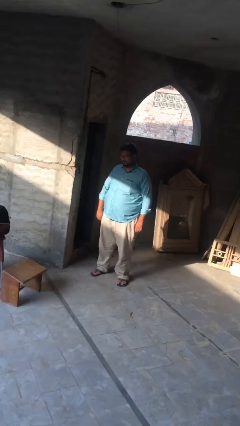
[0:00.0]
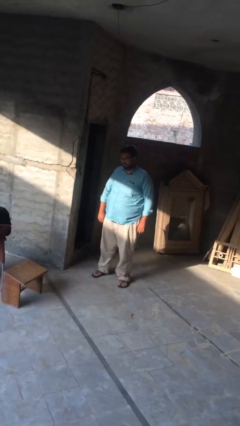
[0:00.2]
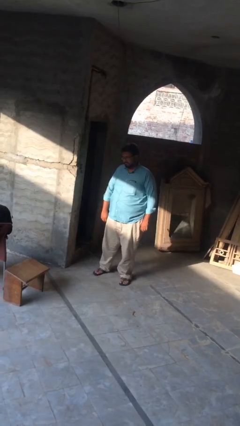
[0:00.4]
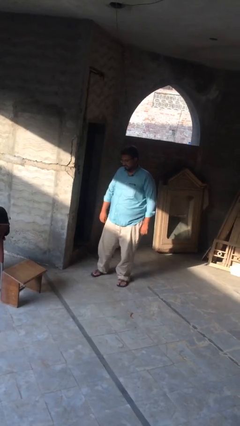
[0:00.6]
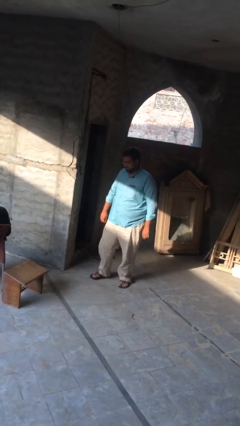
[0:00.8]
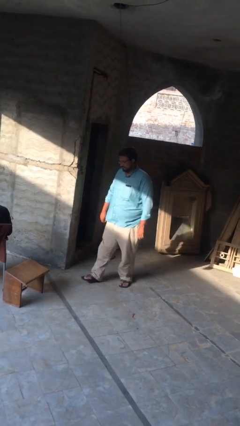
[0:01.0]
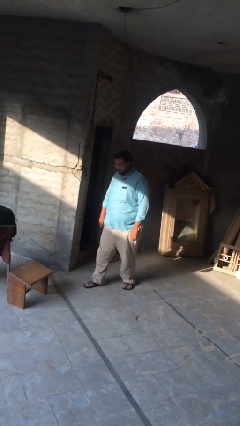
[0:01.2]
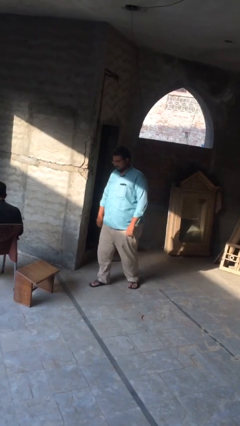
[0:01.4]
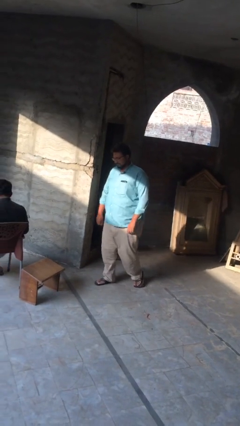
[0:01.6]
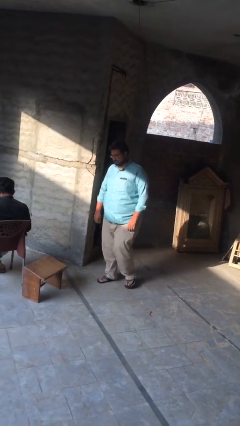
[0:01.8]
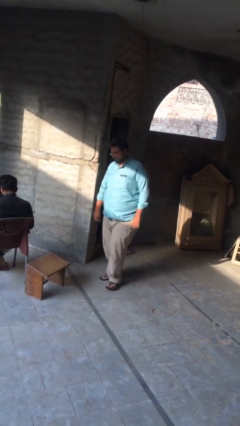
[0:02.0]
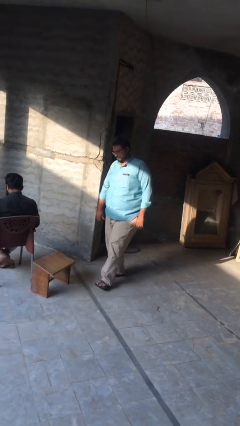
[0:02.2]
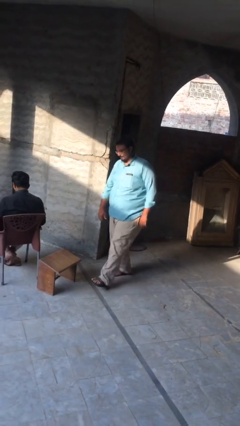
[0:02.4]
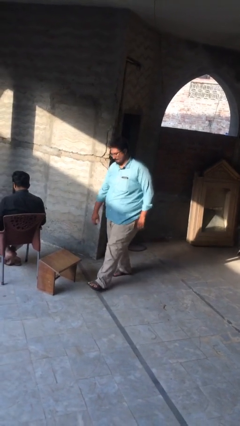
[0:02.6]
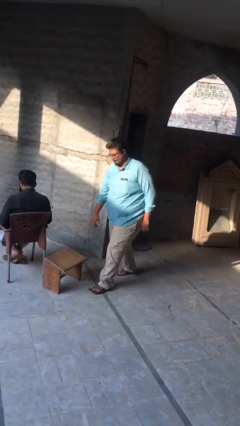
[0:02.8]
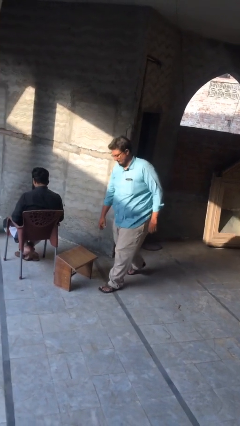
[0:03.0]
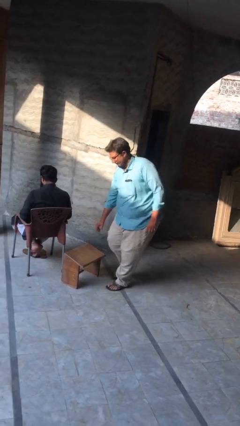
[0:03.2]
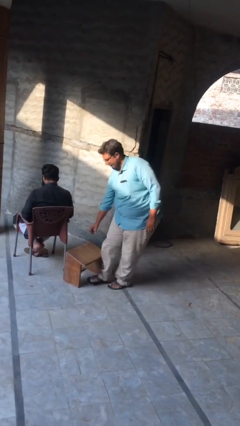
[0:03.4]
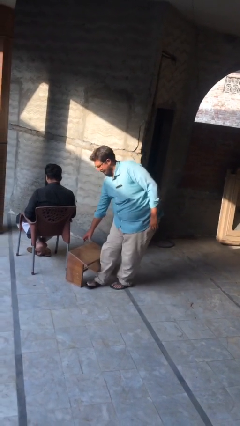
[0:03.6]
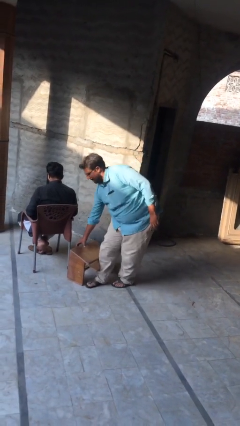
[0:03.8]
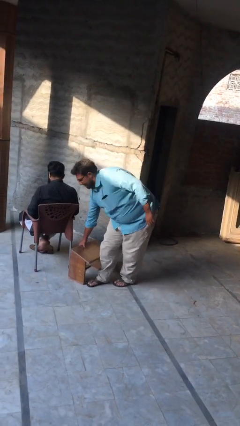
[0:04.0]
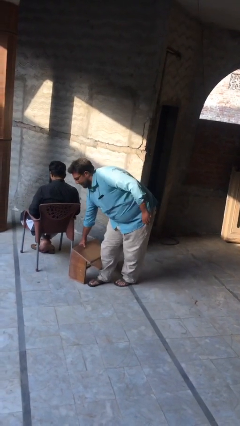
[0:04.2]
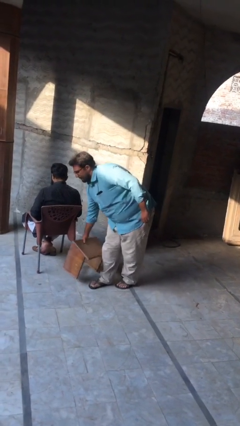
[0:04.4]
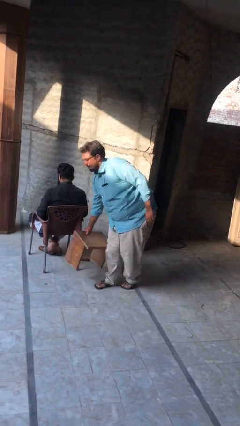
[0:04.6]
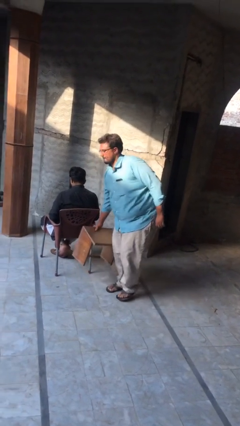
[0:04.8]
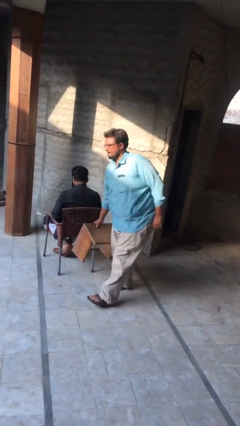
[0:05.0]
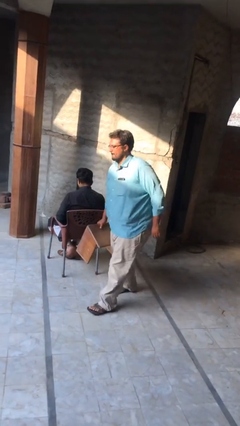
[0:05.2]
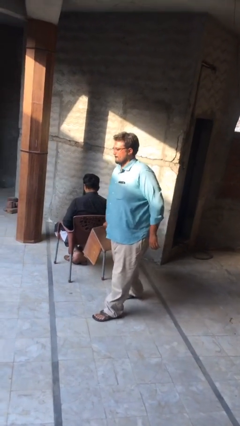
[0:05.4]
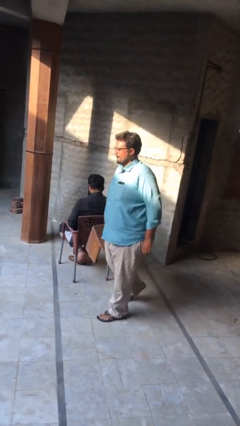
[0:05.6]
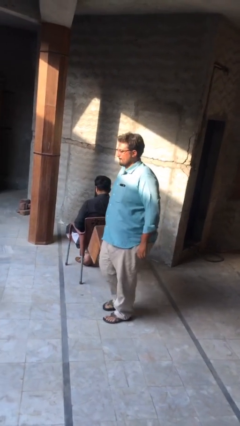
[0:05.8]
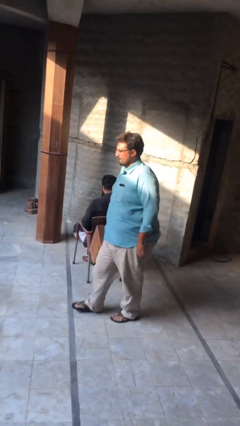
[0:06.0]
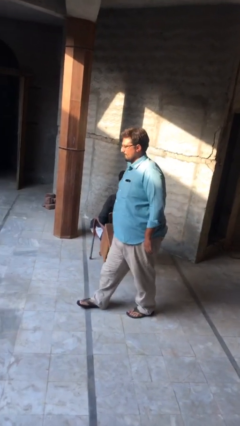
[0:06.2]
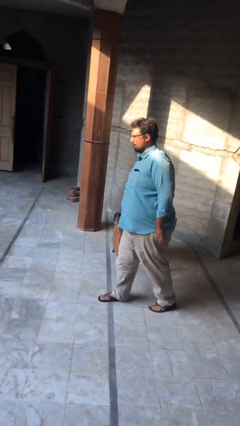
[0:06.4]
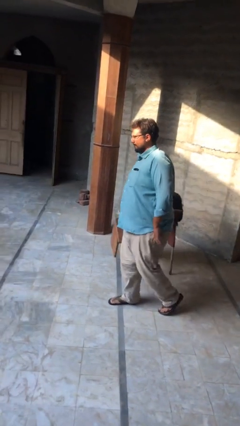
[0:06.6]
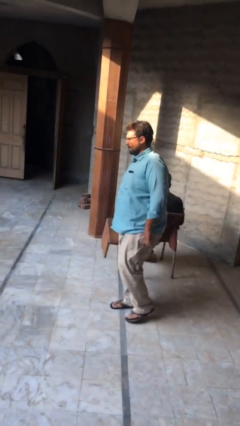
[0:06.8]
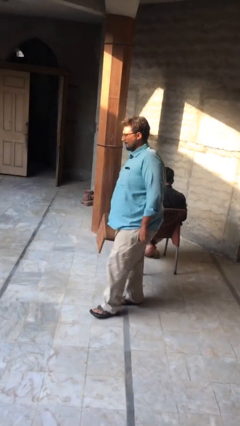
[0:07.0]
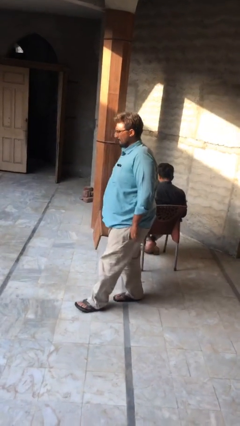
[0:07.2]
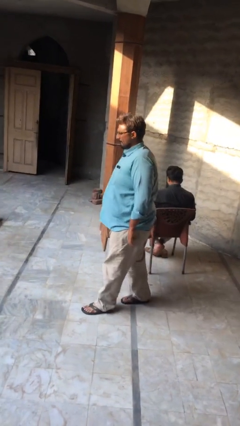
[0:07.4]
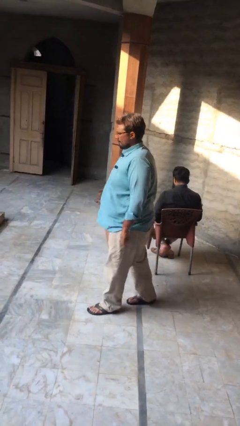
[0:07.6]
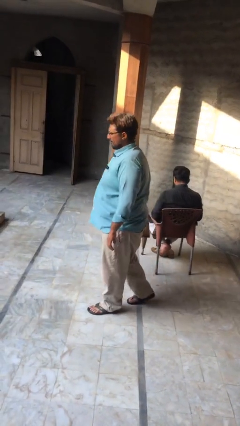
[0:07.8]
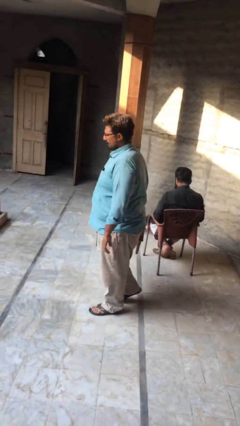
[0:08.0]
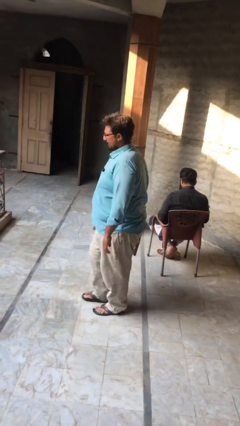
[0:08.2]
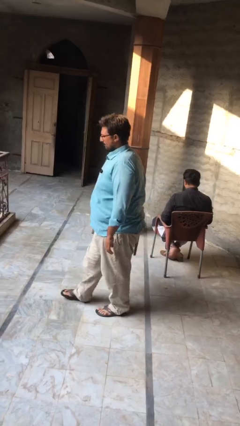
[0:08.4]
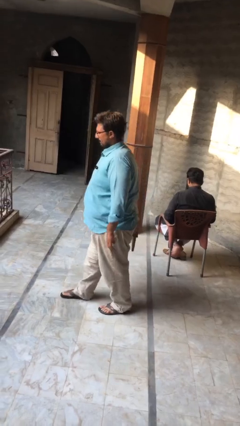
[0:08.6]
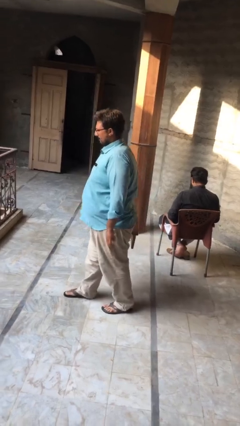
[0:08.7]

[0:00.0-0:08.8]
person steals object from person

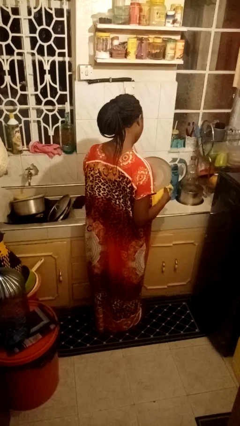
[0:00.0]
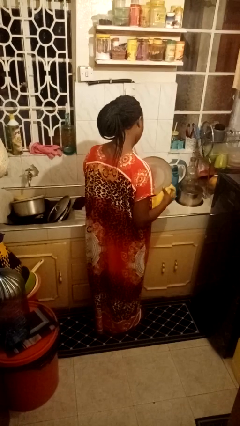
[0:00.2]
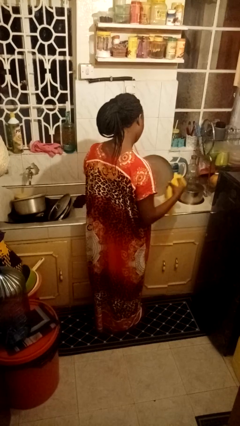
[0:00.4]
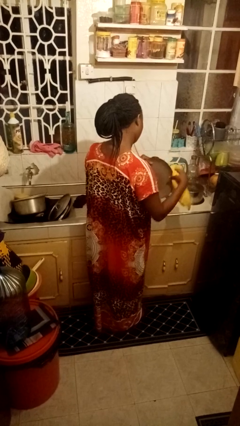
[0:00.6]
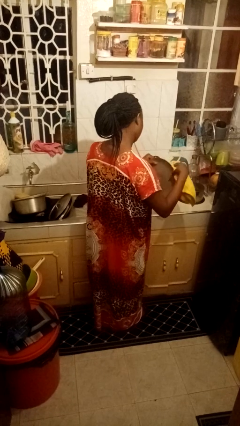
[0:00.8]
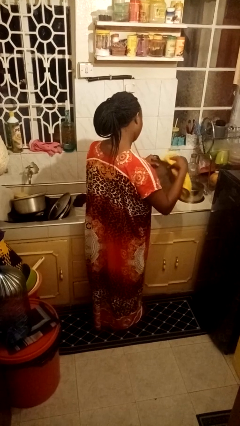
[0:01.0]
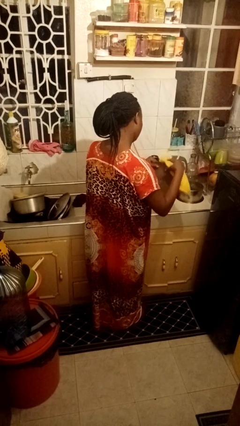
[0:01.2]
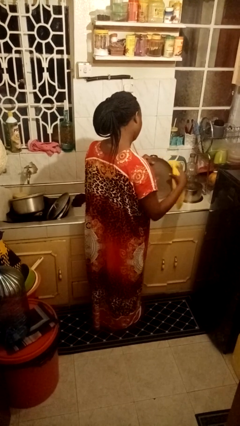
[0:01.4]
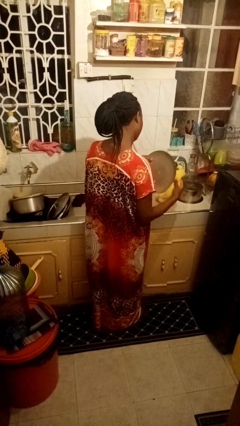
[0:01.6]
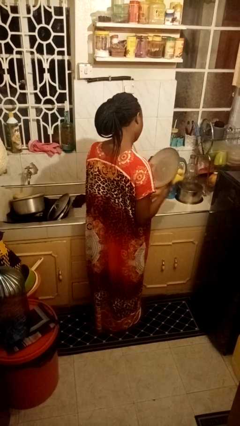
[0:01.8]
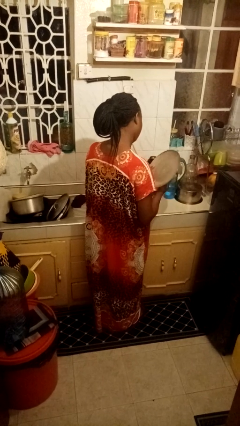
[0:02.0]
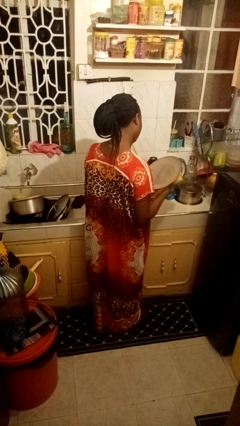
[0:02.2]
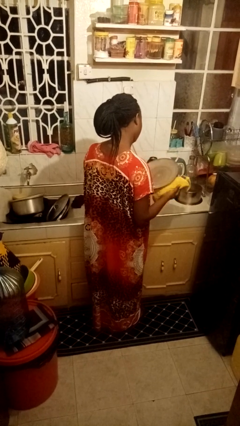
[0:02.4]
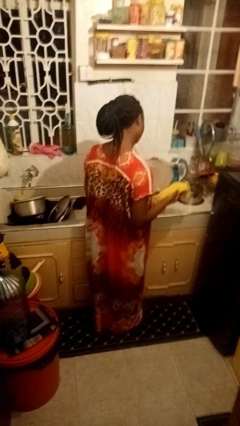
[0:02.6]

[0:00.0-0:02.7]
person dries dish

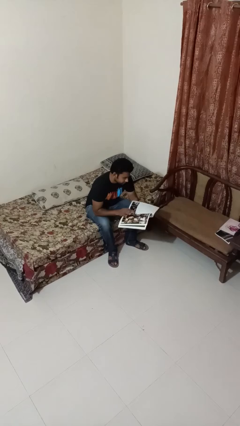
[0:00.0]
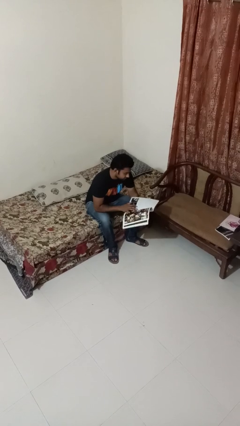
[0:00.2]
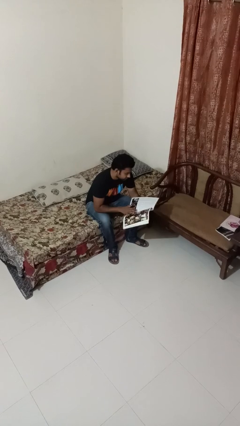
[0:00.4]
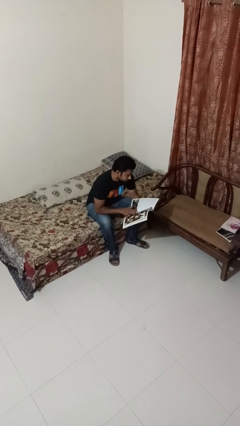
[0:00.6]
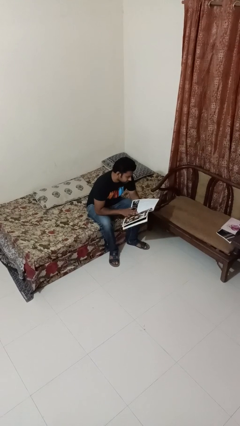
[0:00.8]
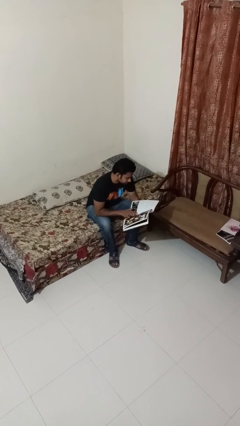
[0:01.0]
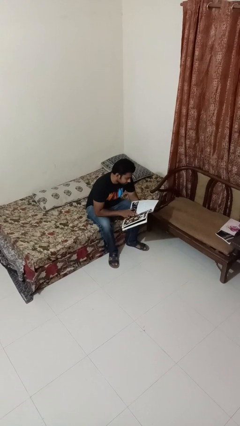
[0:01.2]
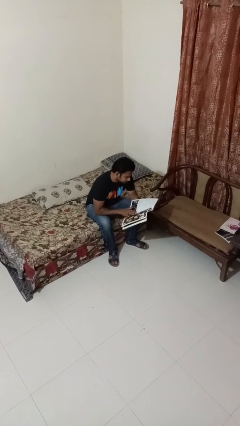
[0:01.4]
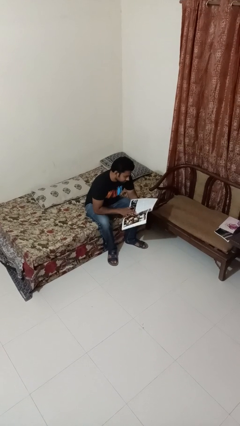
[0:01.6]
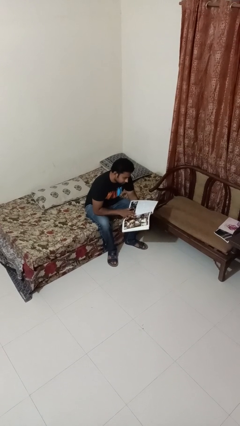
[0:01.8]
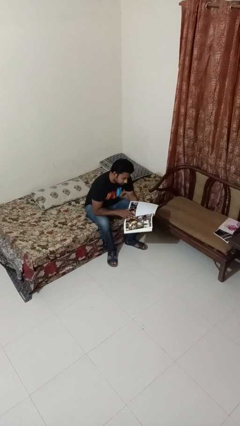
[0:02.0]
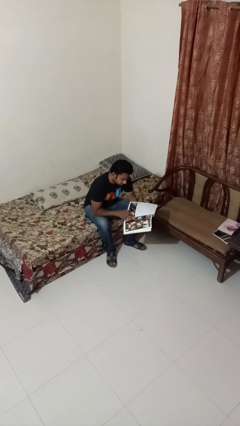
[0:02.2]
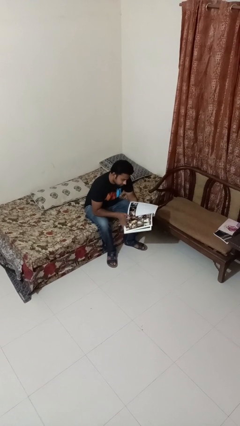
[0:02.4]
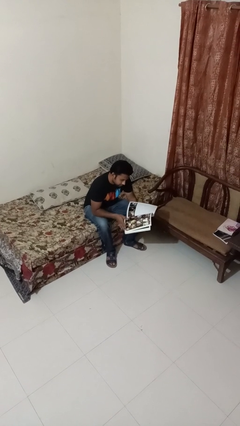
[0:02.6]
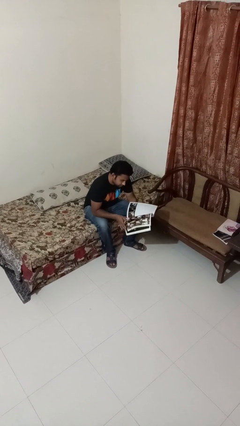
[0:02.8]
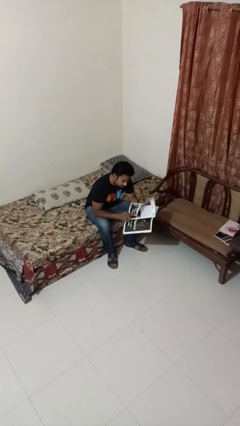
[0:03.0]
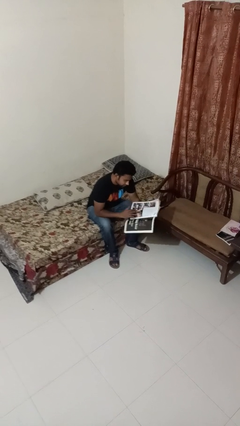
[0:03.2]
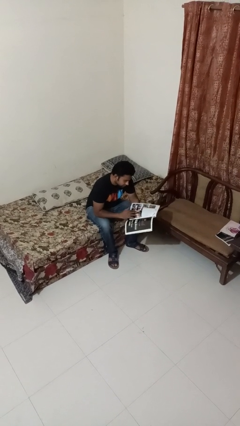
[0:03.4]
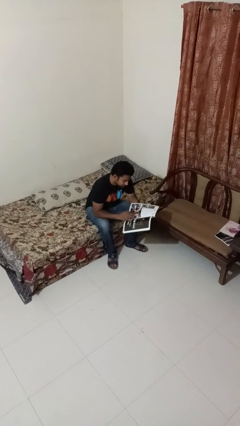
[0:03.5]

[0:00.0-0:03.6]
person reads magazine

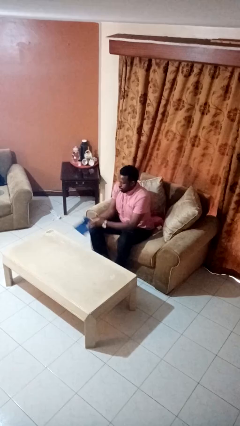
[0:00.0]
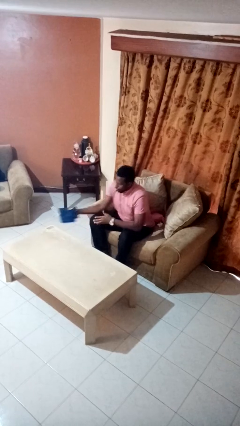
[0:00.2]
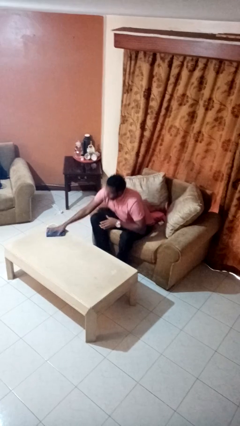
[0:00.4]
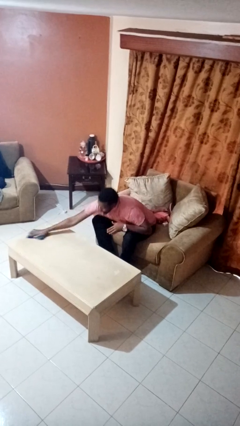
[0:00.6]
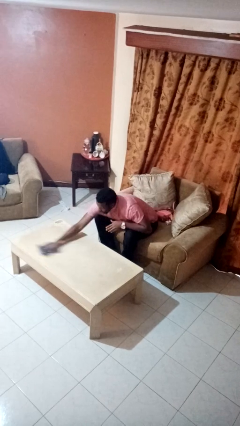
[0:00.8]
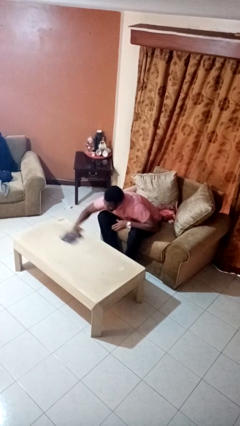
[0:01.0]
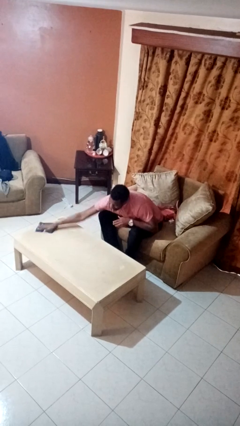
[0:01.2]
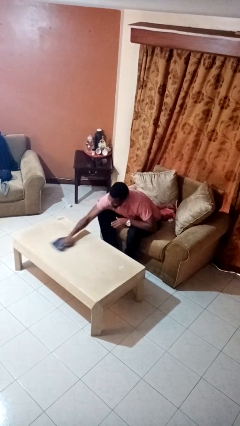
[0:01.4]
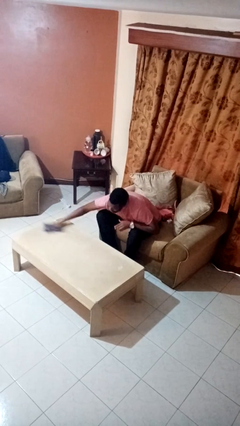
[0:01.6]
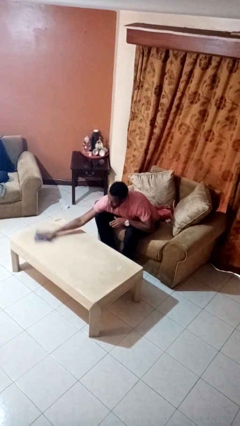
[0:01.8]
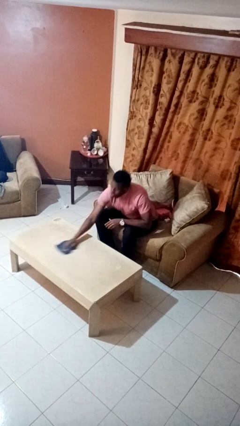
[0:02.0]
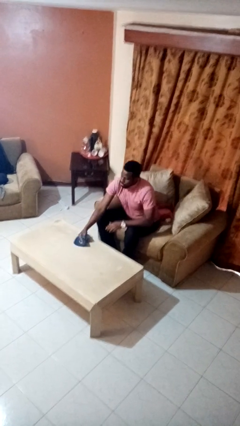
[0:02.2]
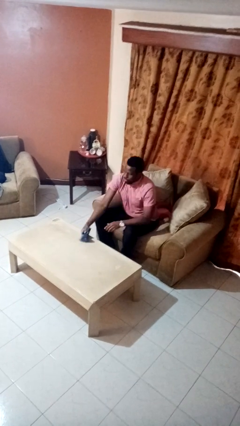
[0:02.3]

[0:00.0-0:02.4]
person cleans table with rag

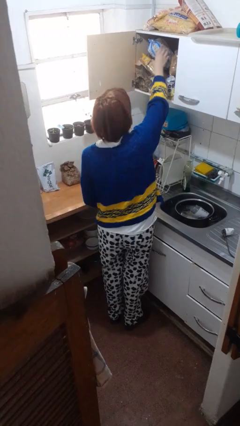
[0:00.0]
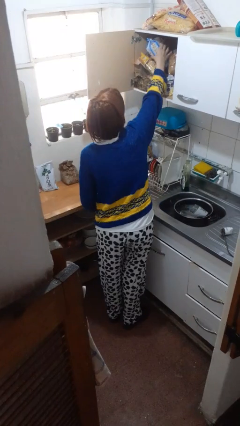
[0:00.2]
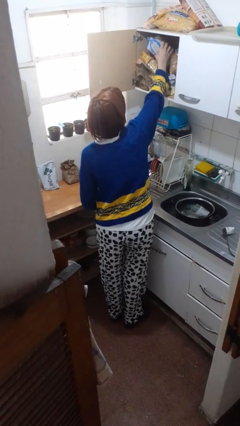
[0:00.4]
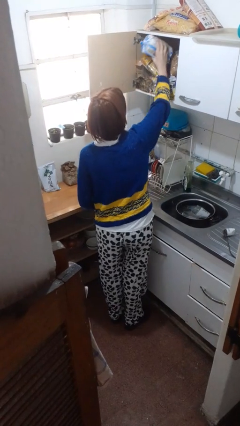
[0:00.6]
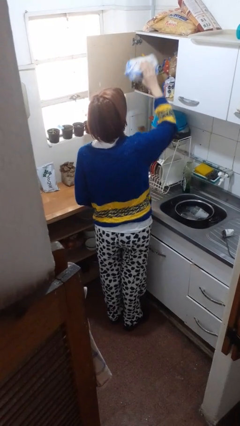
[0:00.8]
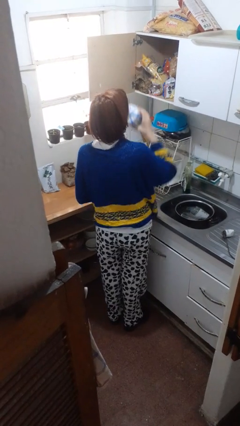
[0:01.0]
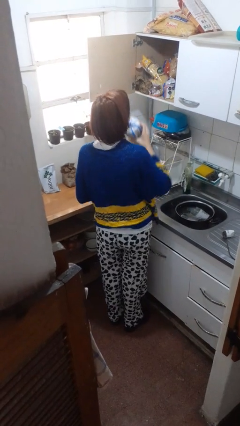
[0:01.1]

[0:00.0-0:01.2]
person takes object from cabinet
